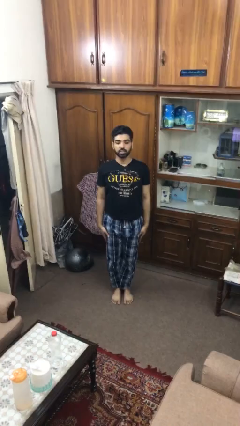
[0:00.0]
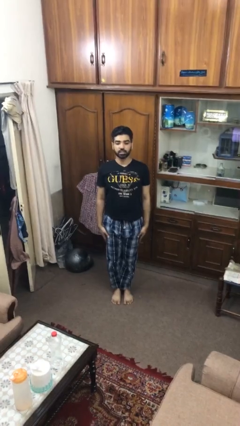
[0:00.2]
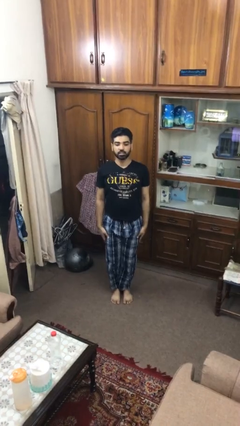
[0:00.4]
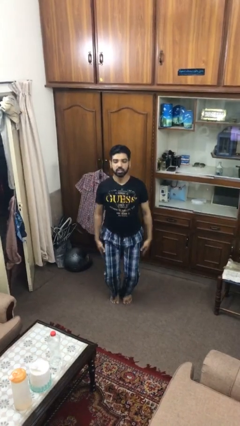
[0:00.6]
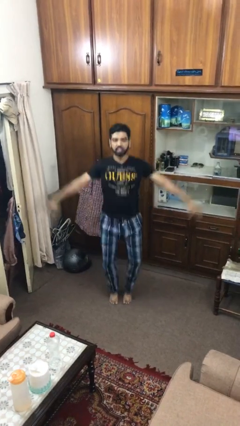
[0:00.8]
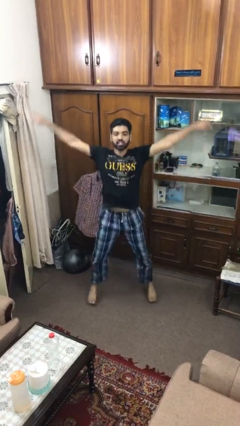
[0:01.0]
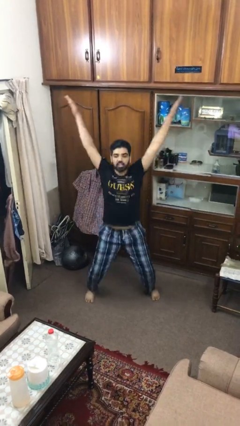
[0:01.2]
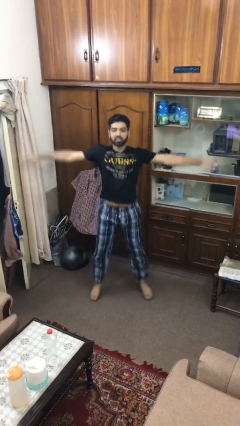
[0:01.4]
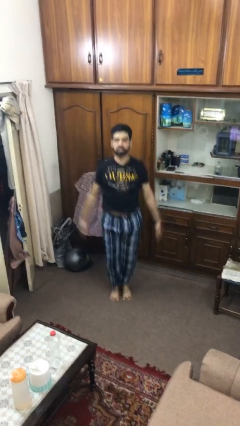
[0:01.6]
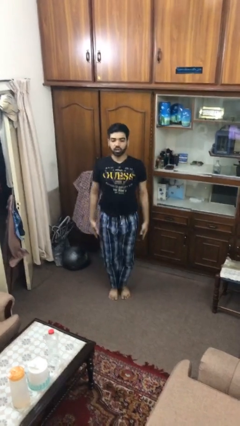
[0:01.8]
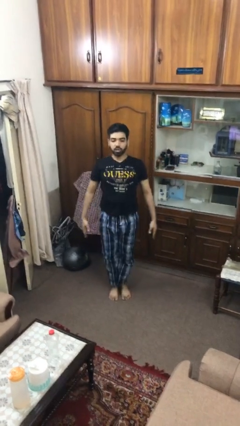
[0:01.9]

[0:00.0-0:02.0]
person exercises with jumping jacks

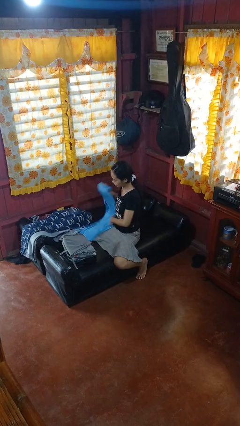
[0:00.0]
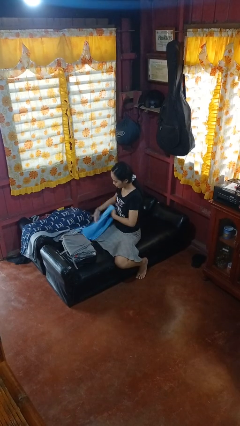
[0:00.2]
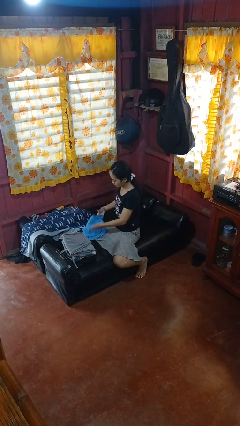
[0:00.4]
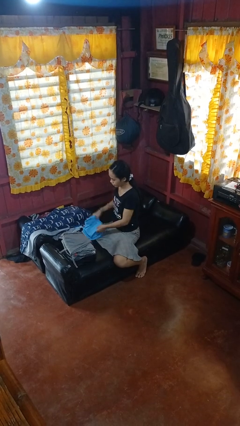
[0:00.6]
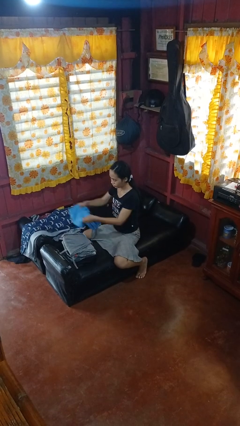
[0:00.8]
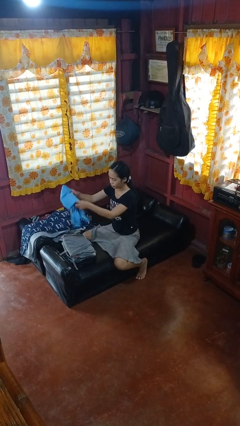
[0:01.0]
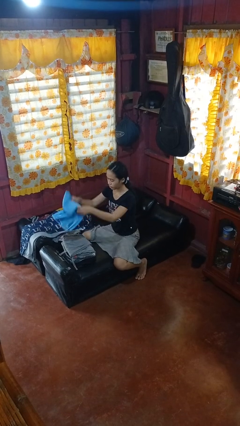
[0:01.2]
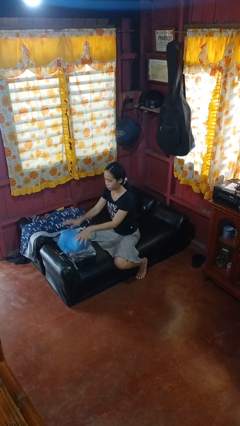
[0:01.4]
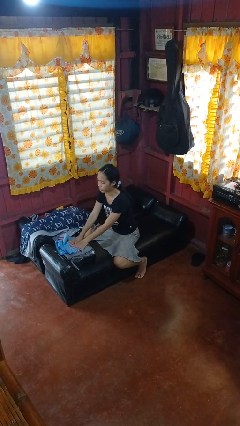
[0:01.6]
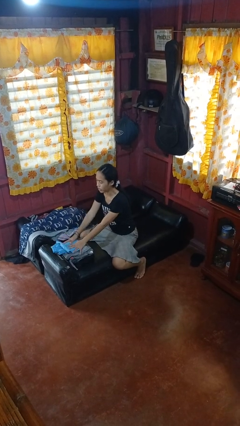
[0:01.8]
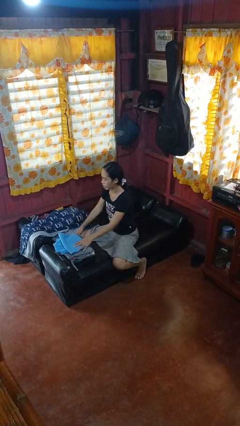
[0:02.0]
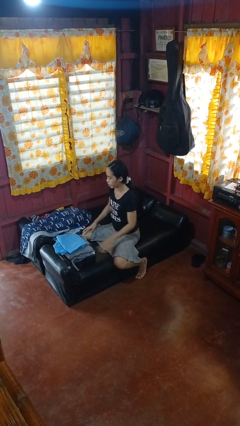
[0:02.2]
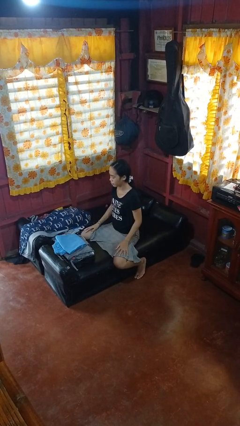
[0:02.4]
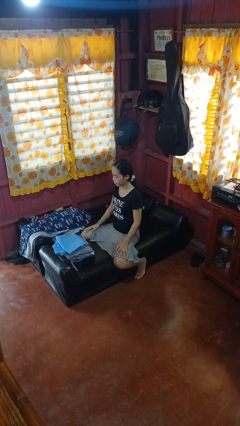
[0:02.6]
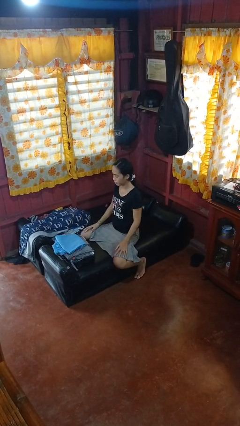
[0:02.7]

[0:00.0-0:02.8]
person folds pants

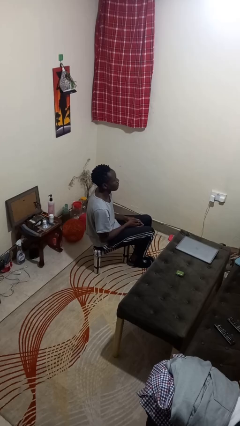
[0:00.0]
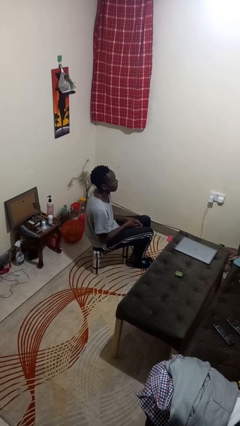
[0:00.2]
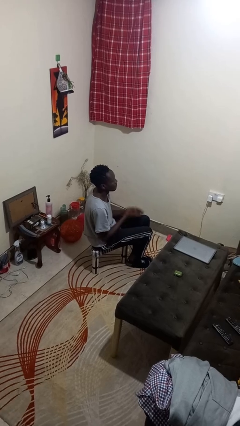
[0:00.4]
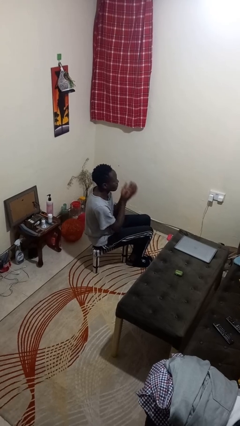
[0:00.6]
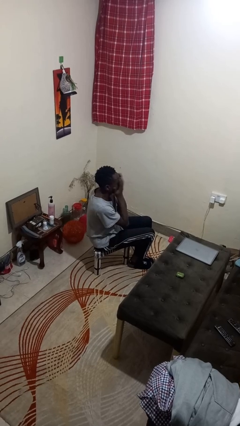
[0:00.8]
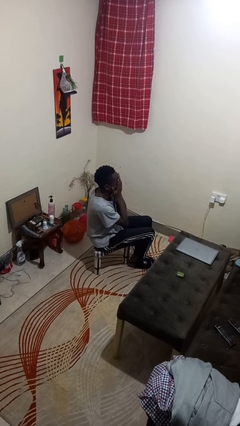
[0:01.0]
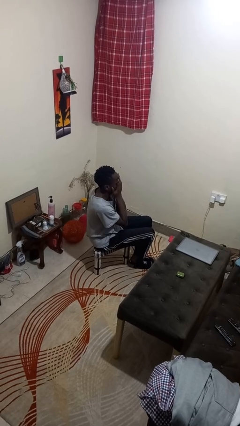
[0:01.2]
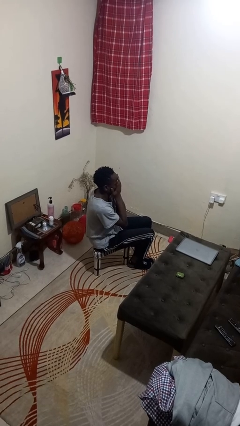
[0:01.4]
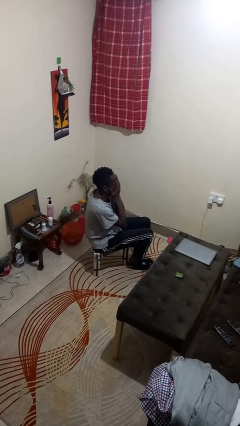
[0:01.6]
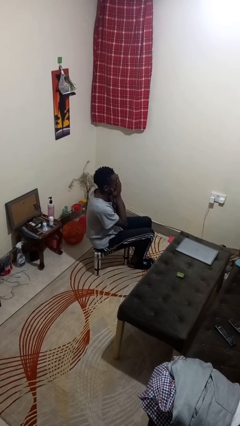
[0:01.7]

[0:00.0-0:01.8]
person covers face with hands

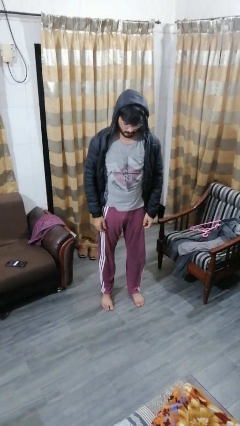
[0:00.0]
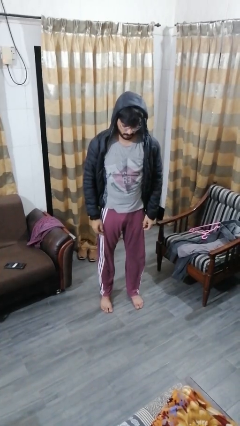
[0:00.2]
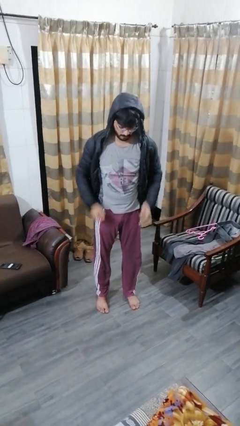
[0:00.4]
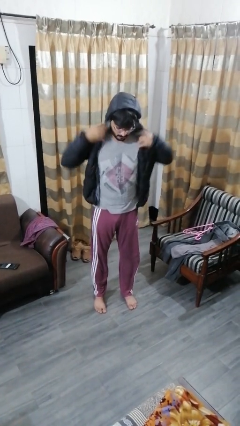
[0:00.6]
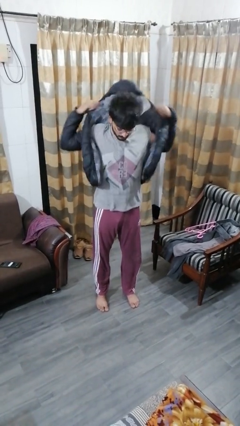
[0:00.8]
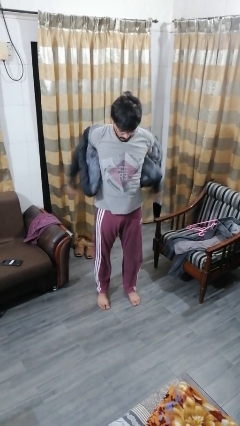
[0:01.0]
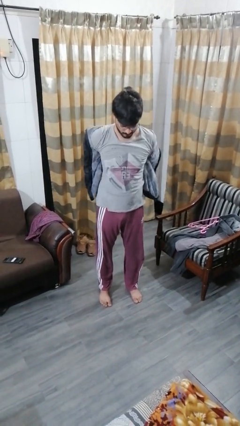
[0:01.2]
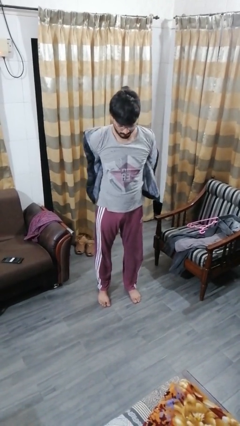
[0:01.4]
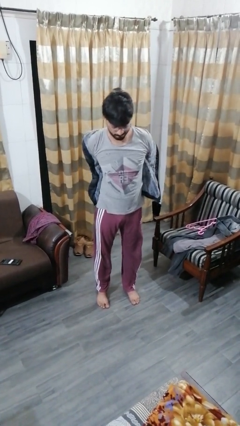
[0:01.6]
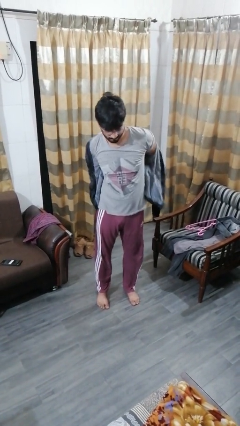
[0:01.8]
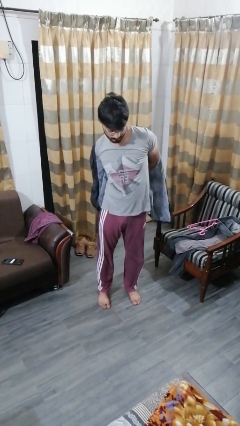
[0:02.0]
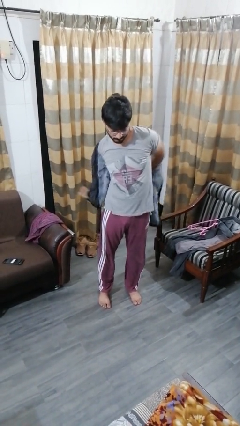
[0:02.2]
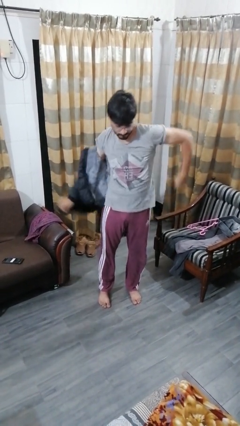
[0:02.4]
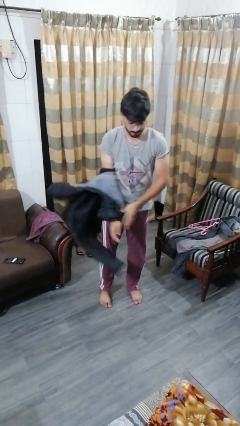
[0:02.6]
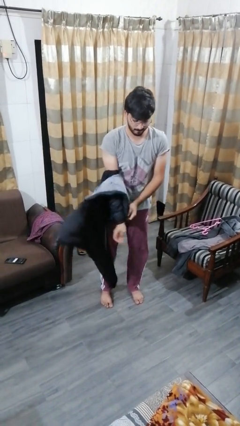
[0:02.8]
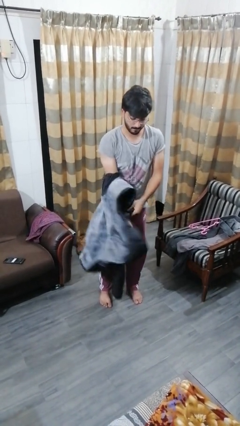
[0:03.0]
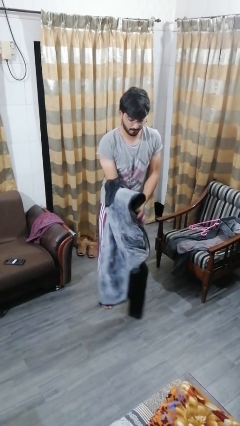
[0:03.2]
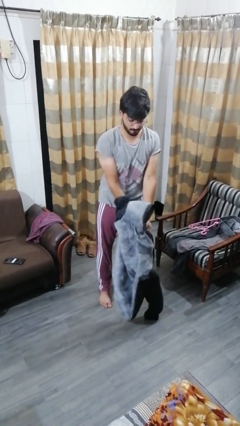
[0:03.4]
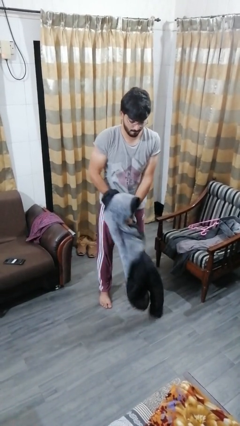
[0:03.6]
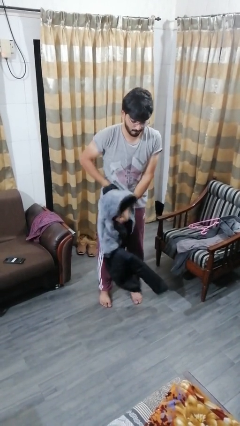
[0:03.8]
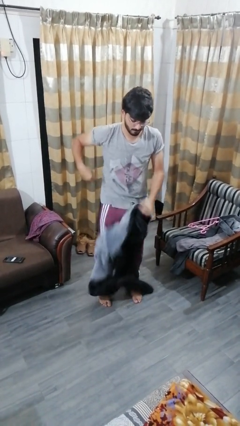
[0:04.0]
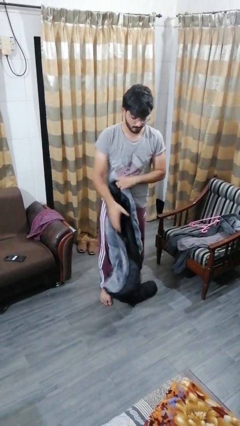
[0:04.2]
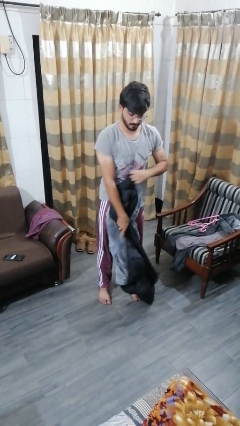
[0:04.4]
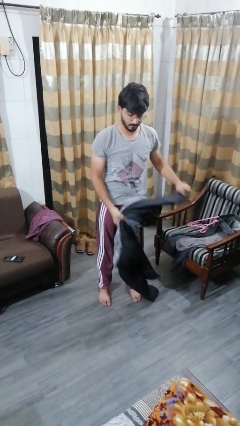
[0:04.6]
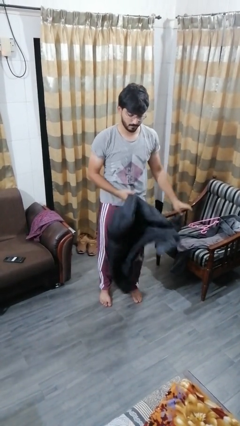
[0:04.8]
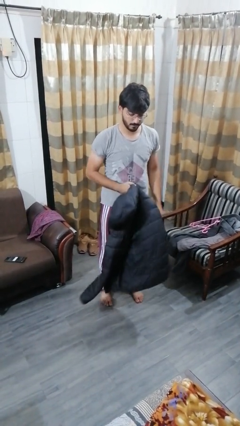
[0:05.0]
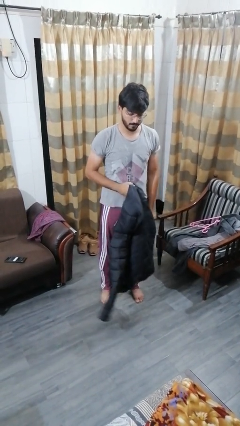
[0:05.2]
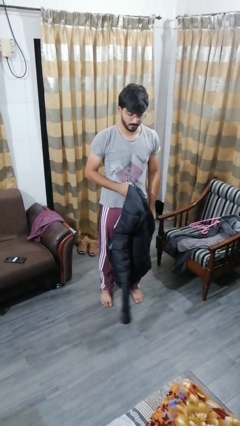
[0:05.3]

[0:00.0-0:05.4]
person takes off hoodie

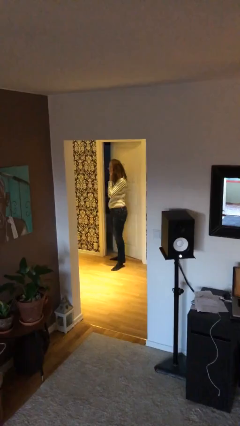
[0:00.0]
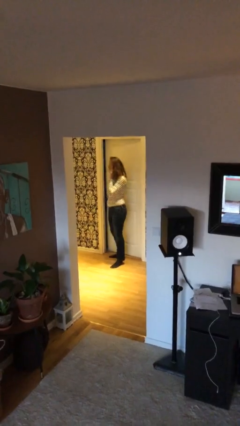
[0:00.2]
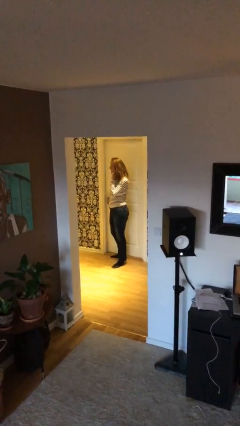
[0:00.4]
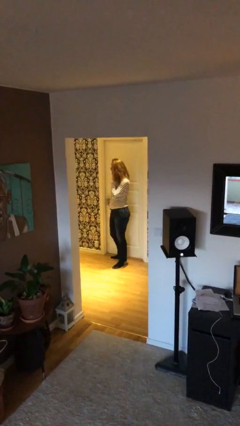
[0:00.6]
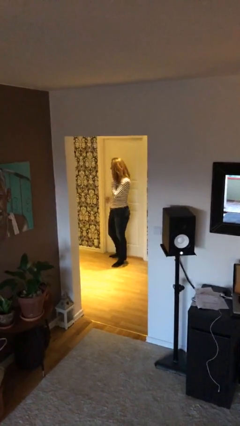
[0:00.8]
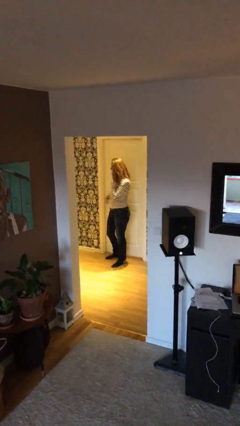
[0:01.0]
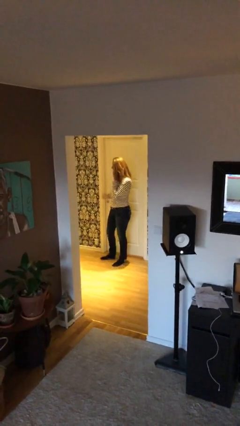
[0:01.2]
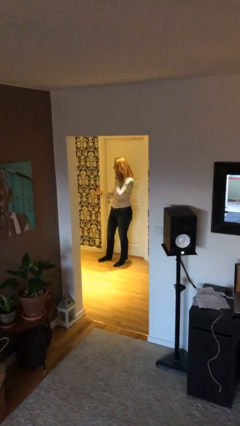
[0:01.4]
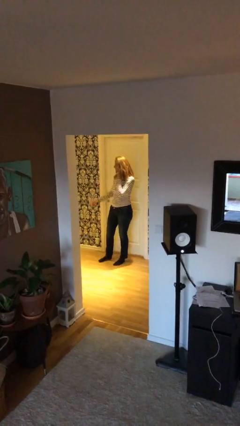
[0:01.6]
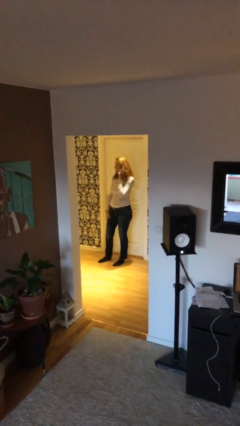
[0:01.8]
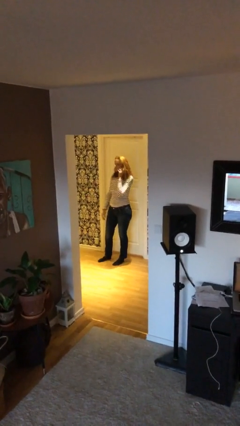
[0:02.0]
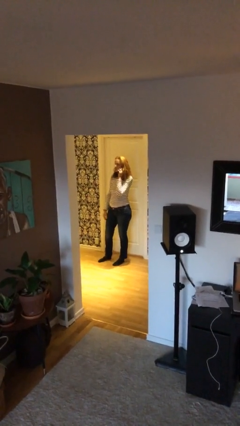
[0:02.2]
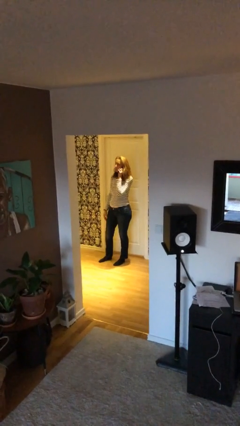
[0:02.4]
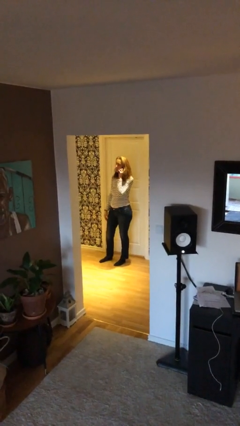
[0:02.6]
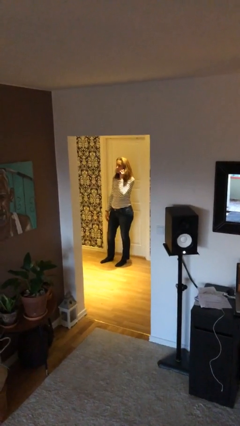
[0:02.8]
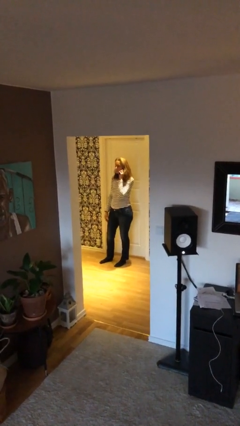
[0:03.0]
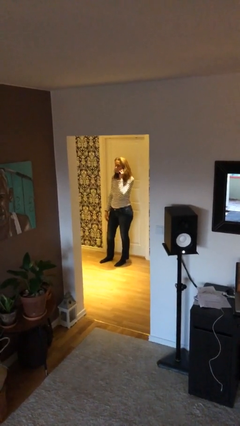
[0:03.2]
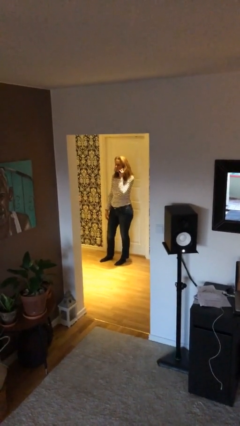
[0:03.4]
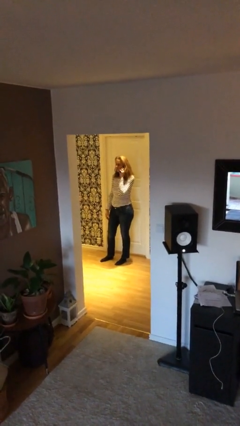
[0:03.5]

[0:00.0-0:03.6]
person closes facility door

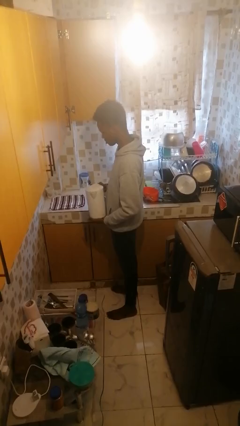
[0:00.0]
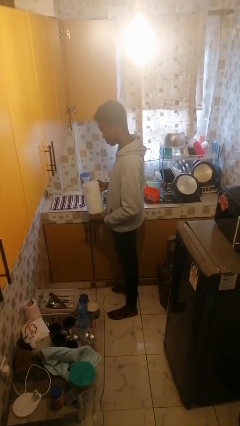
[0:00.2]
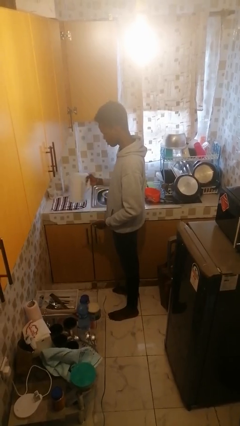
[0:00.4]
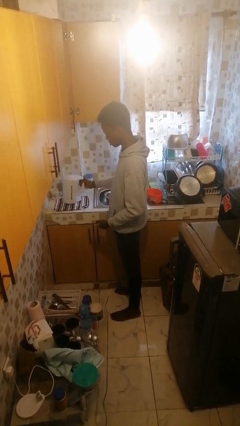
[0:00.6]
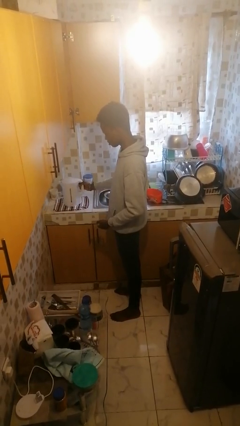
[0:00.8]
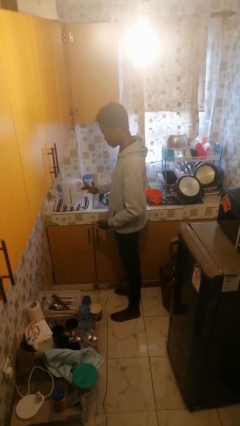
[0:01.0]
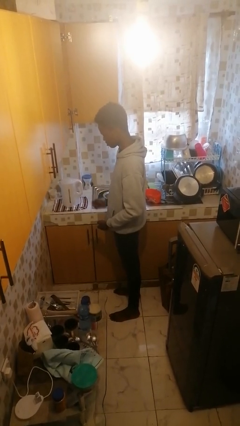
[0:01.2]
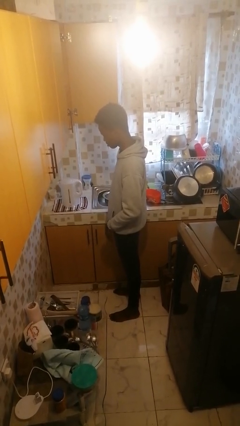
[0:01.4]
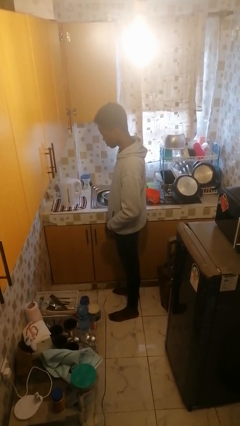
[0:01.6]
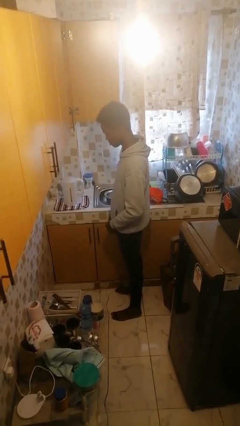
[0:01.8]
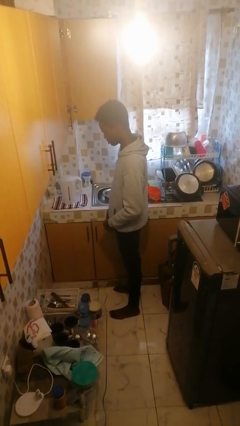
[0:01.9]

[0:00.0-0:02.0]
person puts down object on countertop
